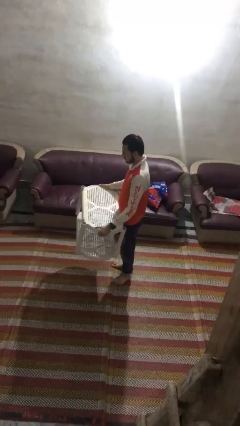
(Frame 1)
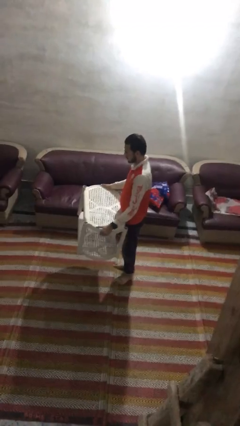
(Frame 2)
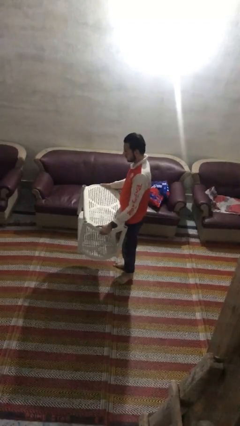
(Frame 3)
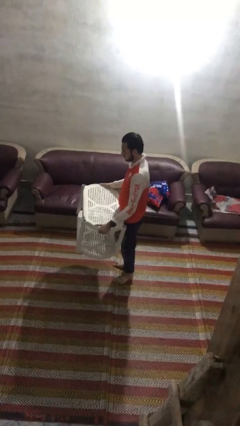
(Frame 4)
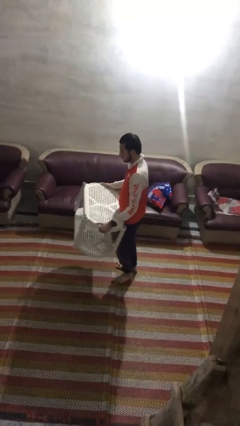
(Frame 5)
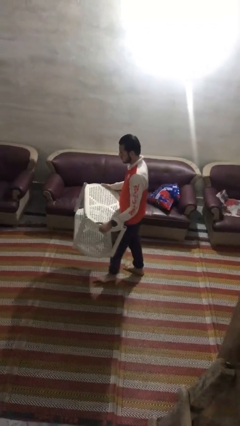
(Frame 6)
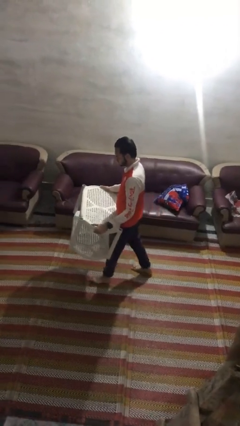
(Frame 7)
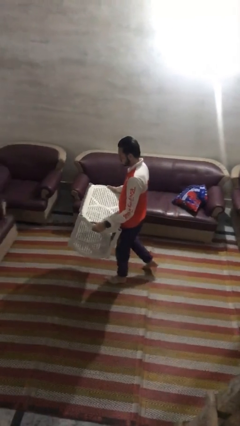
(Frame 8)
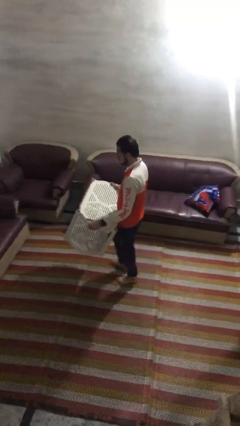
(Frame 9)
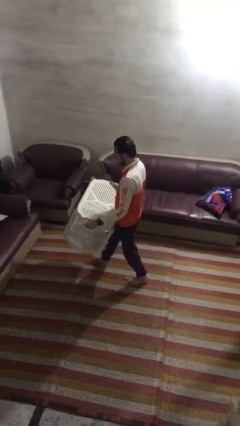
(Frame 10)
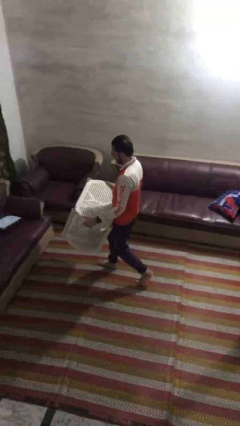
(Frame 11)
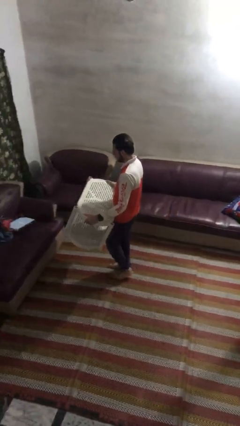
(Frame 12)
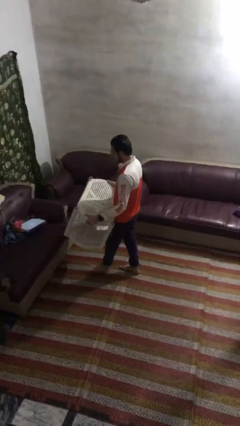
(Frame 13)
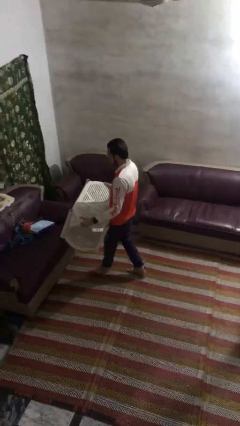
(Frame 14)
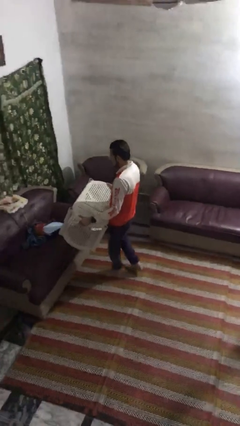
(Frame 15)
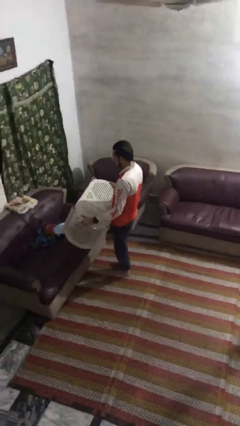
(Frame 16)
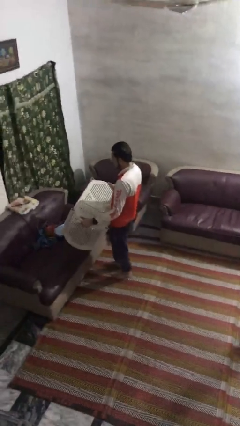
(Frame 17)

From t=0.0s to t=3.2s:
person carries furniture

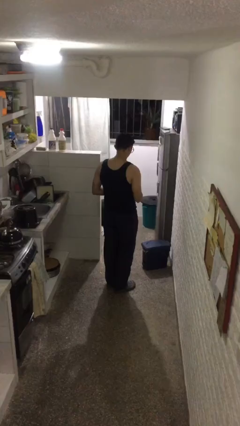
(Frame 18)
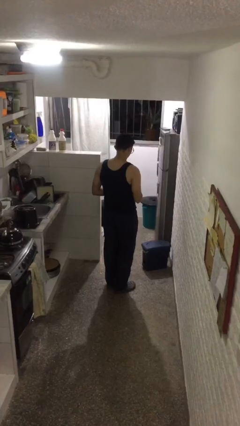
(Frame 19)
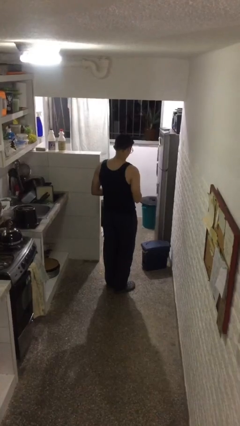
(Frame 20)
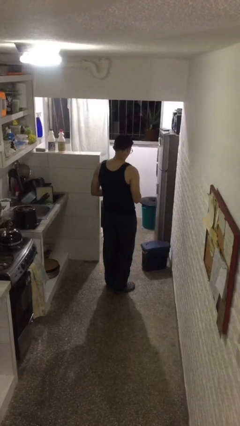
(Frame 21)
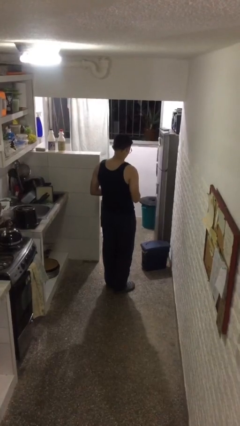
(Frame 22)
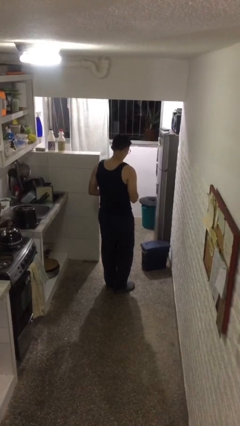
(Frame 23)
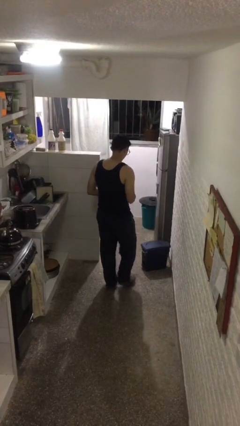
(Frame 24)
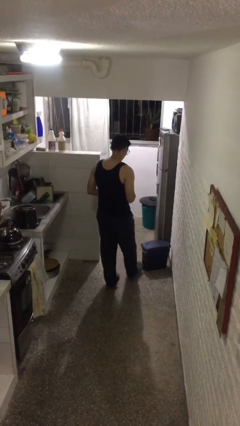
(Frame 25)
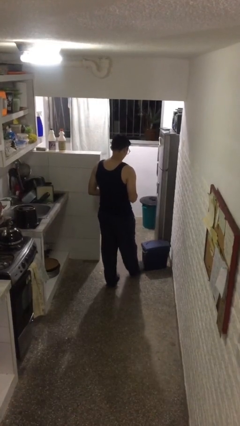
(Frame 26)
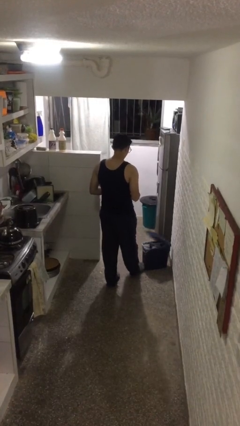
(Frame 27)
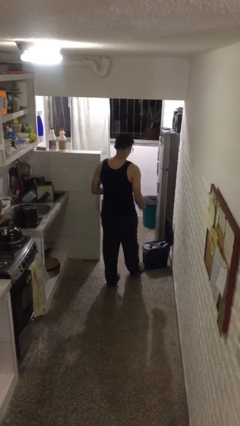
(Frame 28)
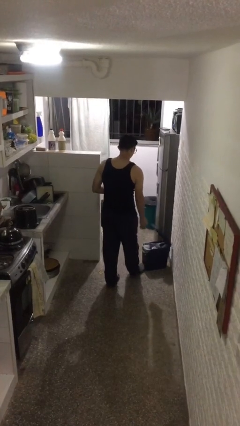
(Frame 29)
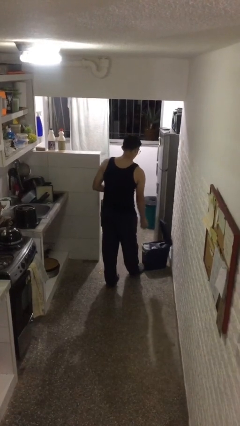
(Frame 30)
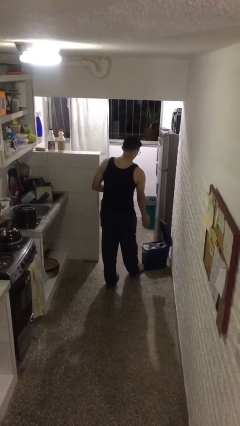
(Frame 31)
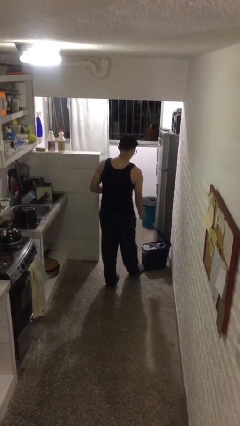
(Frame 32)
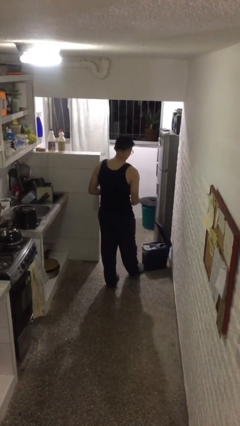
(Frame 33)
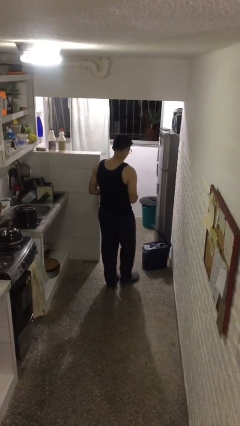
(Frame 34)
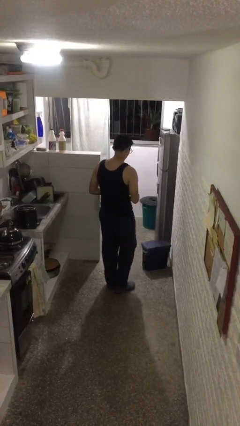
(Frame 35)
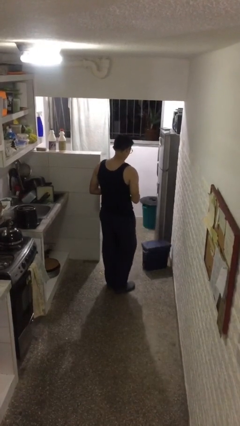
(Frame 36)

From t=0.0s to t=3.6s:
person discards trash

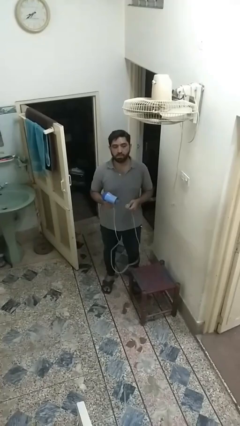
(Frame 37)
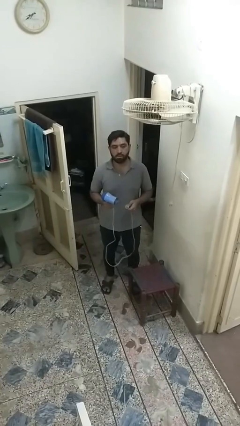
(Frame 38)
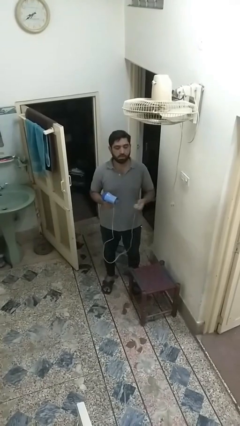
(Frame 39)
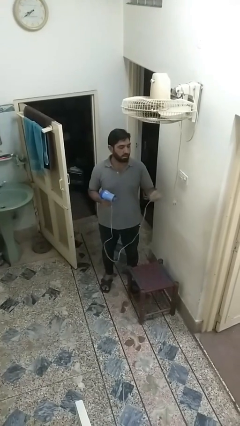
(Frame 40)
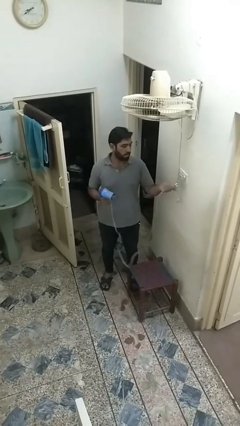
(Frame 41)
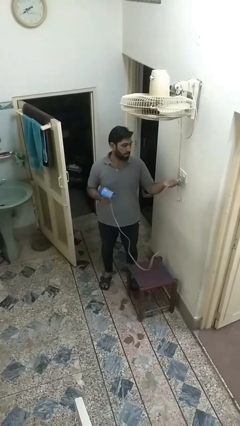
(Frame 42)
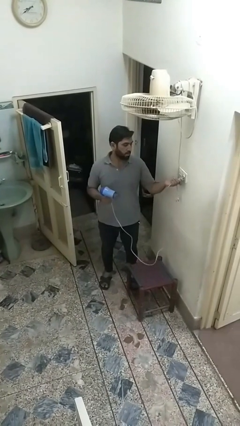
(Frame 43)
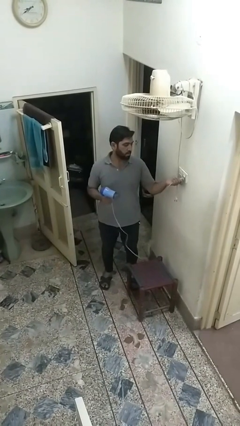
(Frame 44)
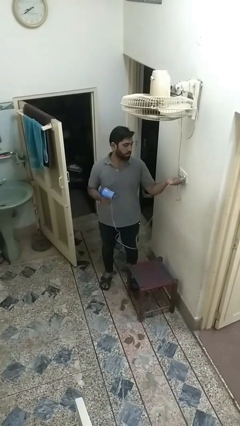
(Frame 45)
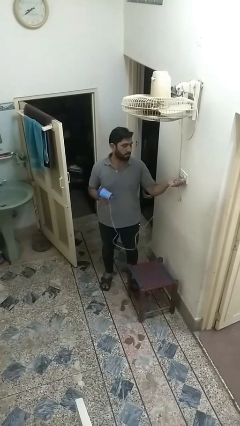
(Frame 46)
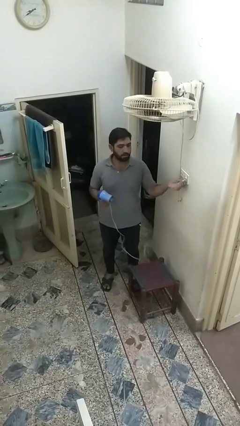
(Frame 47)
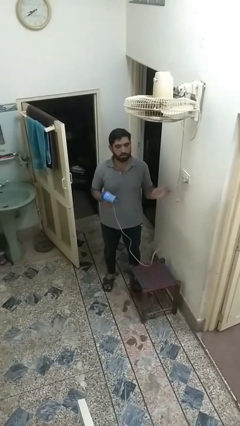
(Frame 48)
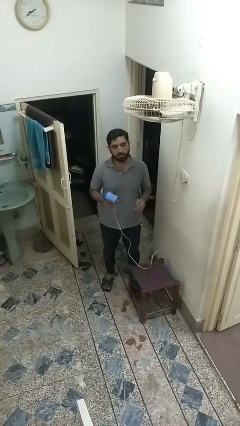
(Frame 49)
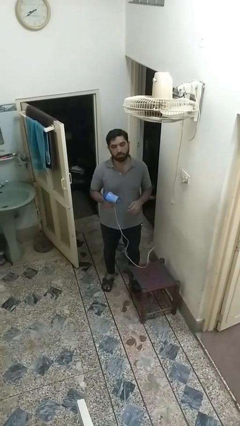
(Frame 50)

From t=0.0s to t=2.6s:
person plugs into electrical socket

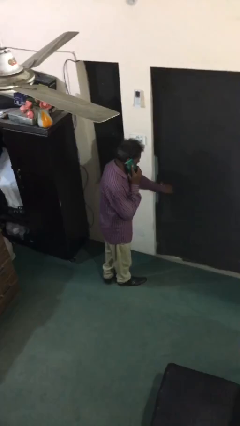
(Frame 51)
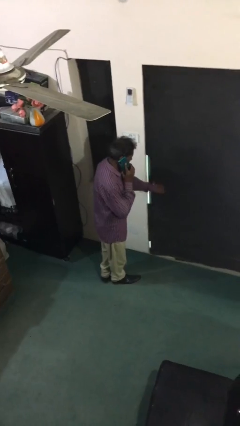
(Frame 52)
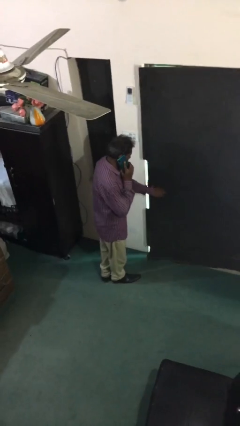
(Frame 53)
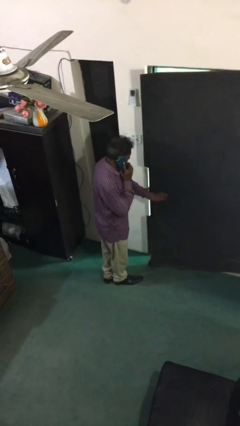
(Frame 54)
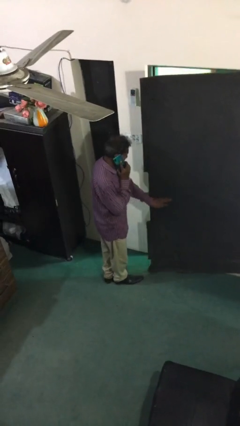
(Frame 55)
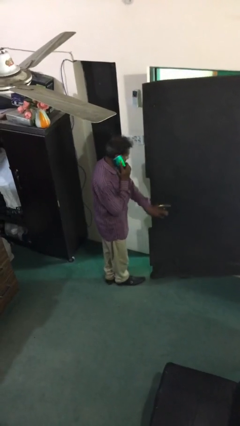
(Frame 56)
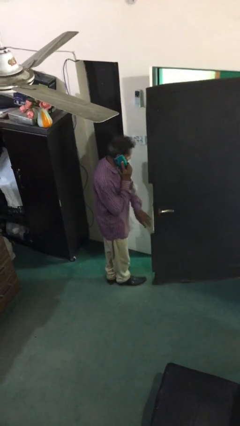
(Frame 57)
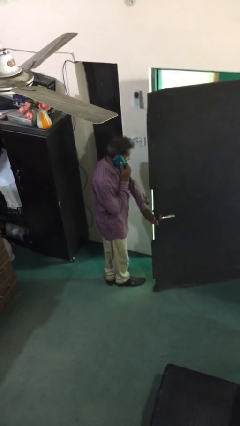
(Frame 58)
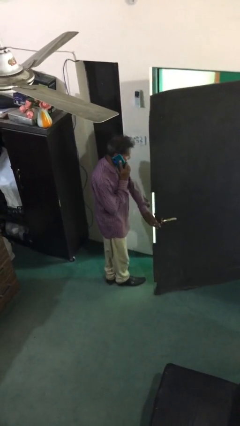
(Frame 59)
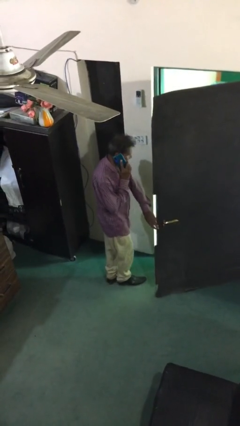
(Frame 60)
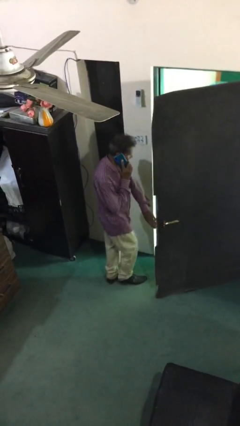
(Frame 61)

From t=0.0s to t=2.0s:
person opens facility door

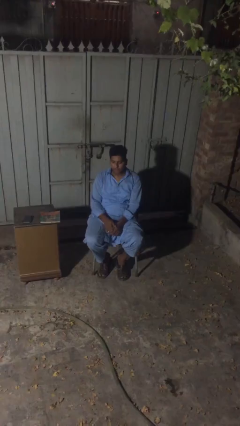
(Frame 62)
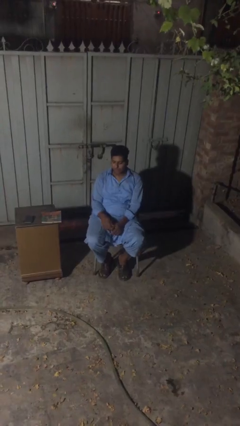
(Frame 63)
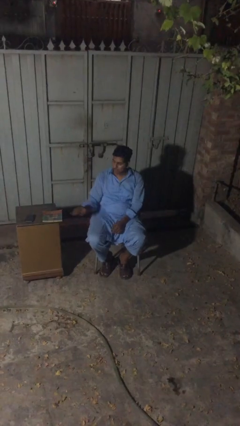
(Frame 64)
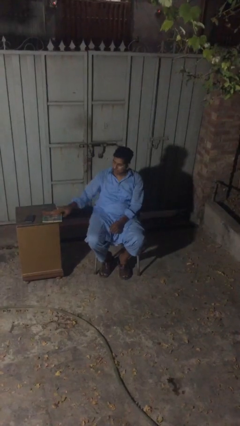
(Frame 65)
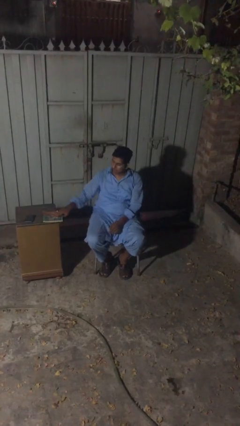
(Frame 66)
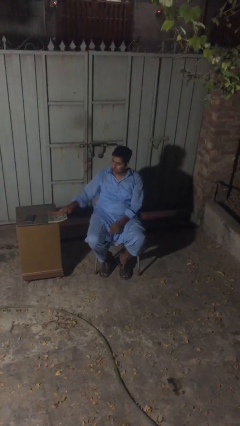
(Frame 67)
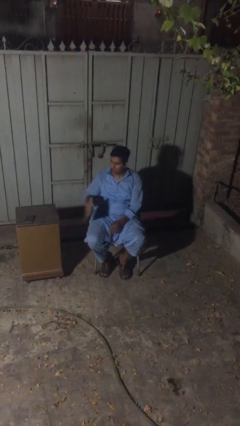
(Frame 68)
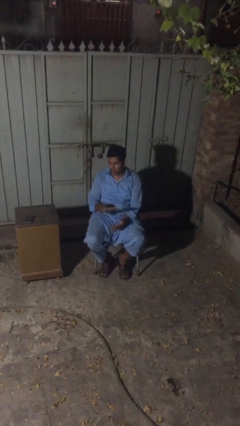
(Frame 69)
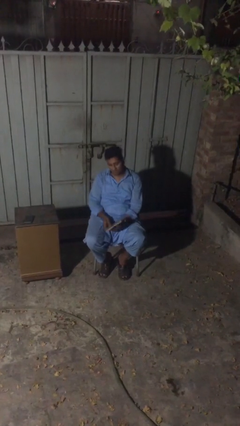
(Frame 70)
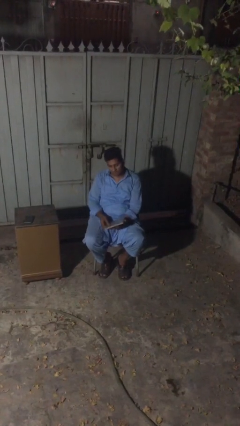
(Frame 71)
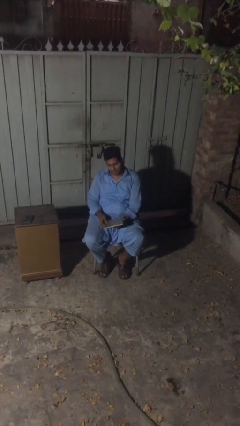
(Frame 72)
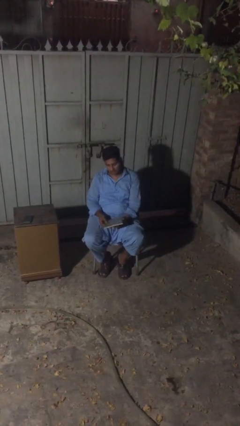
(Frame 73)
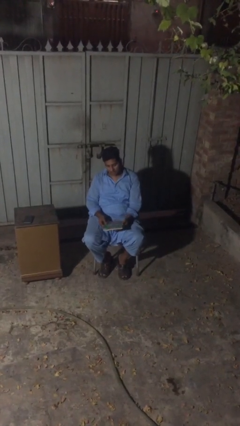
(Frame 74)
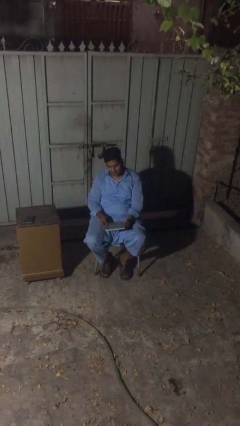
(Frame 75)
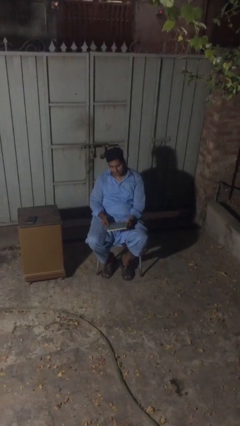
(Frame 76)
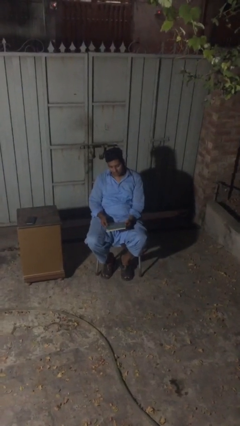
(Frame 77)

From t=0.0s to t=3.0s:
person picks up object from table

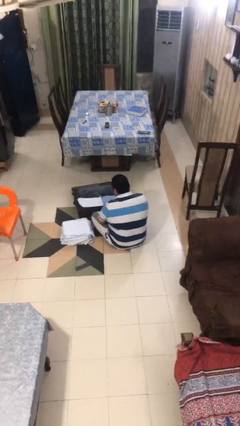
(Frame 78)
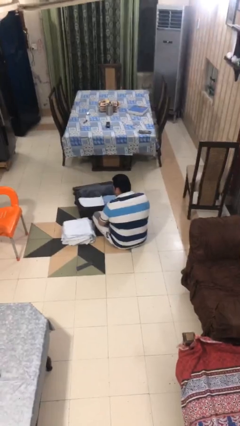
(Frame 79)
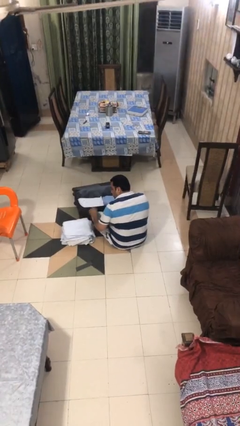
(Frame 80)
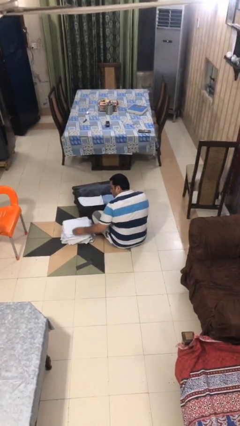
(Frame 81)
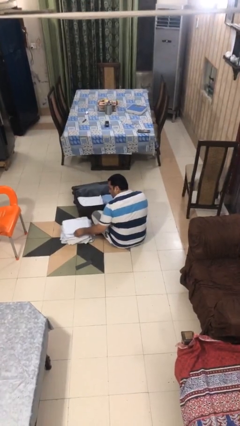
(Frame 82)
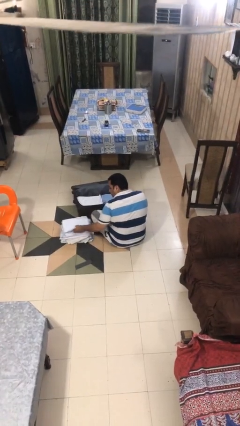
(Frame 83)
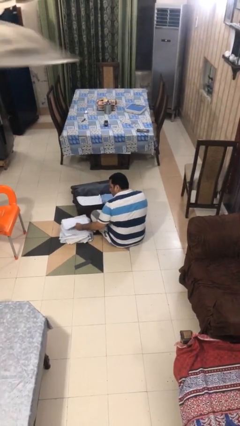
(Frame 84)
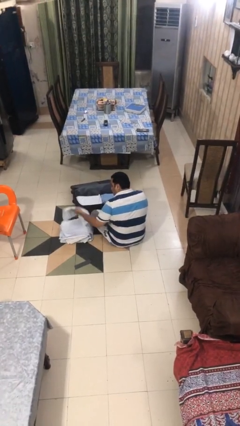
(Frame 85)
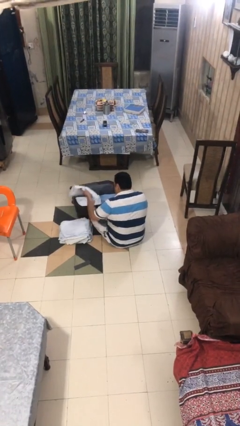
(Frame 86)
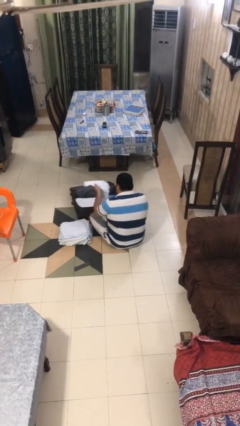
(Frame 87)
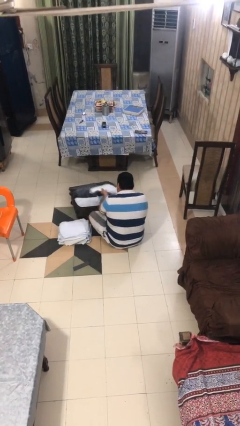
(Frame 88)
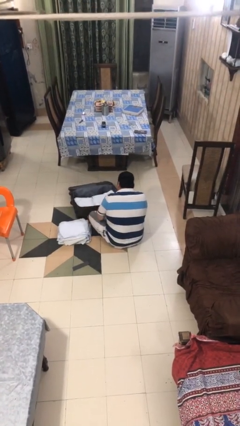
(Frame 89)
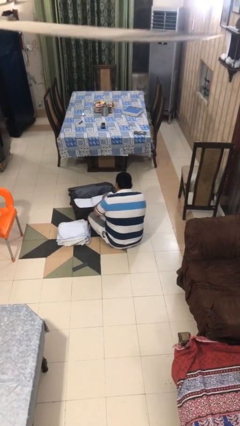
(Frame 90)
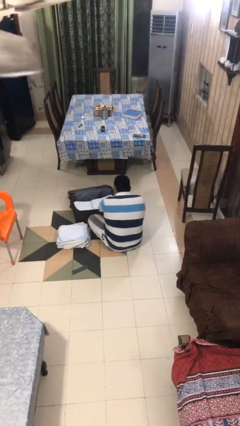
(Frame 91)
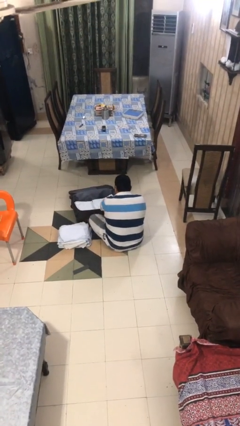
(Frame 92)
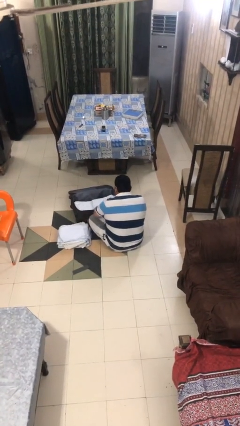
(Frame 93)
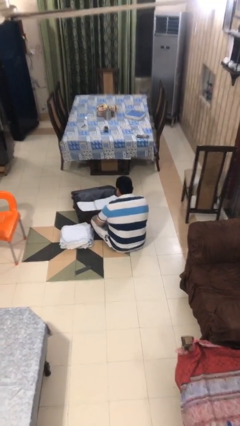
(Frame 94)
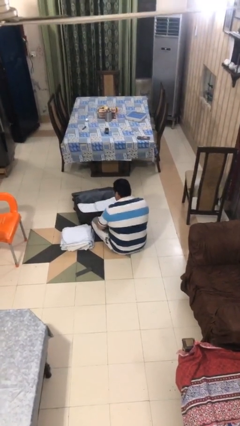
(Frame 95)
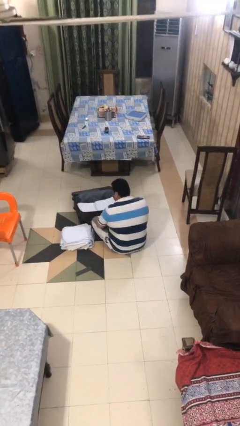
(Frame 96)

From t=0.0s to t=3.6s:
person loads clothes into suitcase
